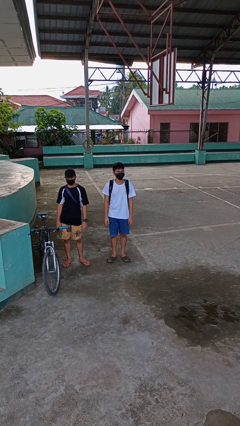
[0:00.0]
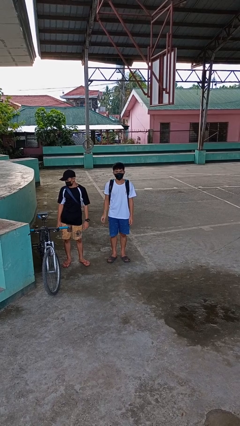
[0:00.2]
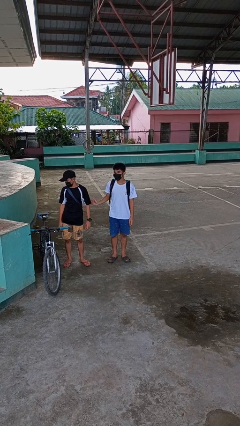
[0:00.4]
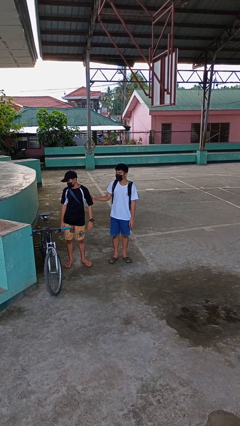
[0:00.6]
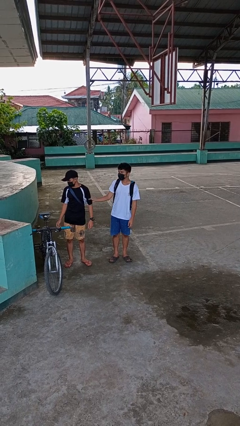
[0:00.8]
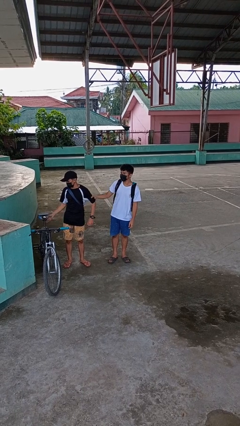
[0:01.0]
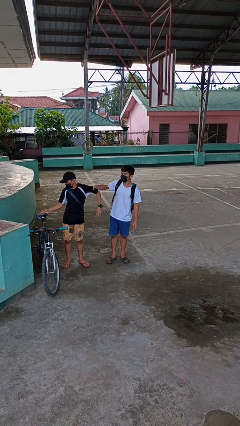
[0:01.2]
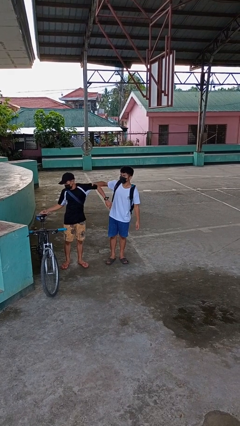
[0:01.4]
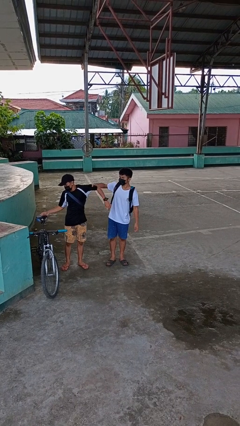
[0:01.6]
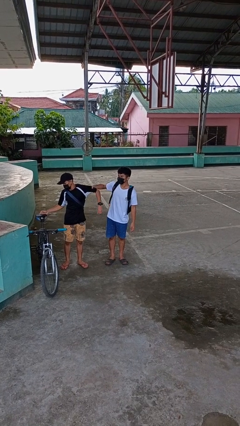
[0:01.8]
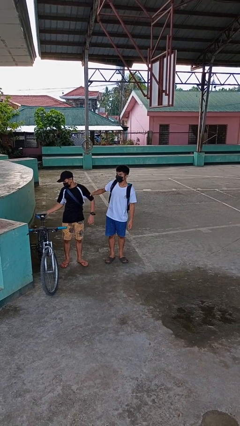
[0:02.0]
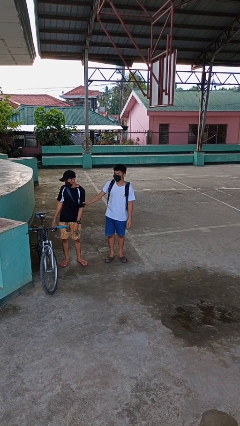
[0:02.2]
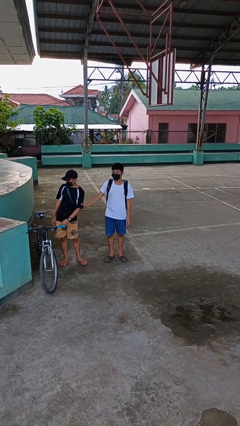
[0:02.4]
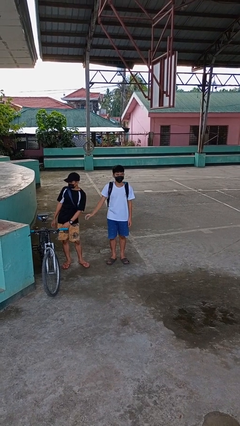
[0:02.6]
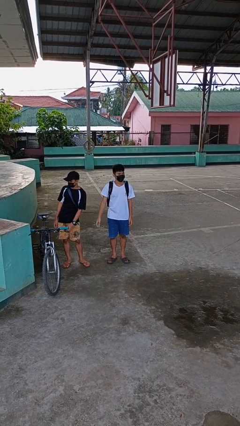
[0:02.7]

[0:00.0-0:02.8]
person grabs person by bicep

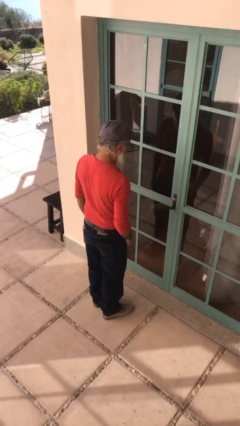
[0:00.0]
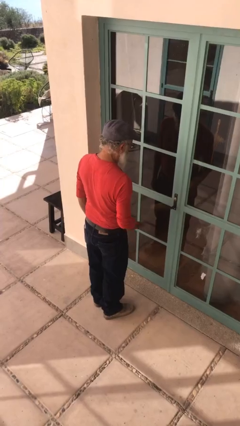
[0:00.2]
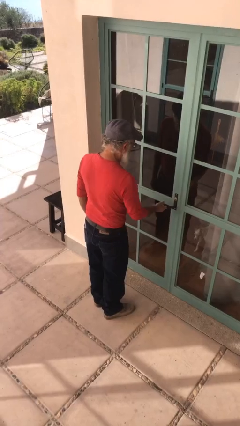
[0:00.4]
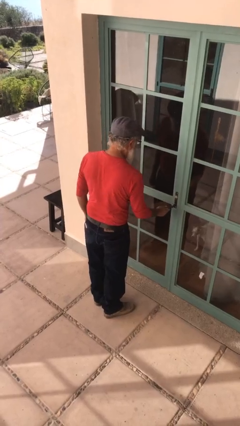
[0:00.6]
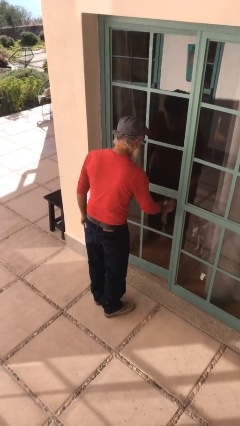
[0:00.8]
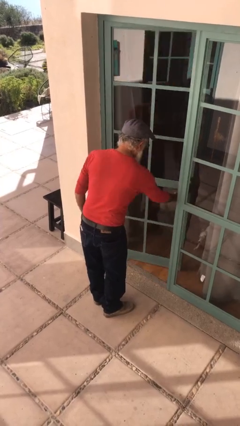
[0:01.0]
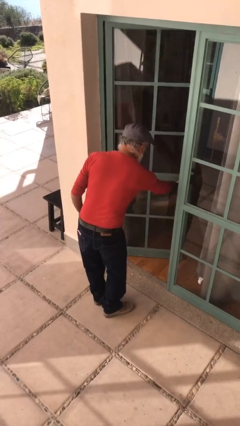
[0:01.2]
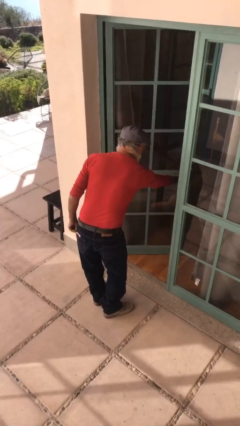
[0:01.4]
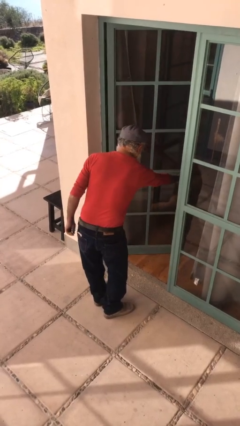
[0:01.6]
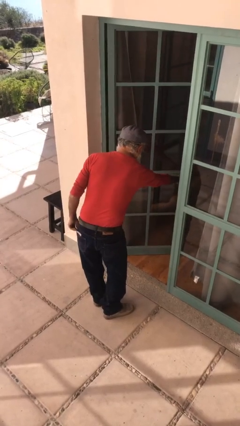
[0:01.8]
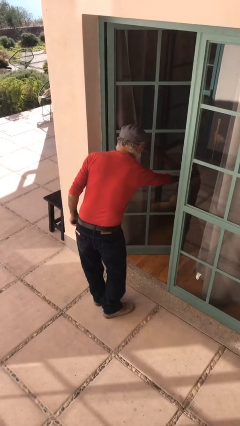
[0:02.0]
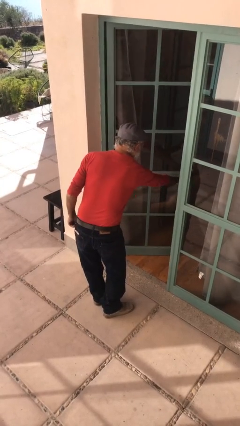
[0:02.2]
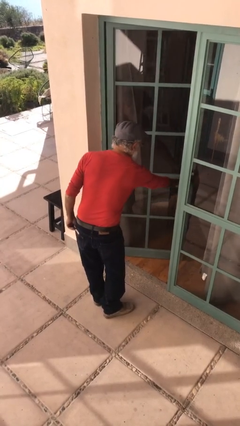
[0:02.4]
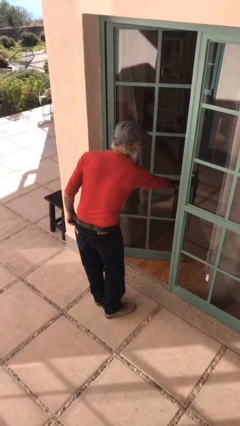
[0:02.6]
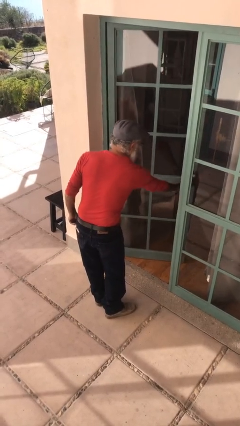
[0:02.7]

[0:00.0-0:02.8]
person opens facility door

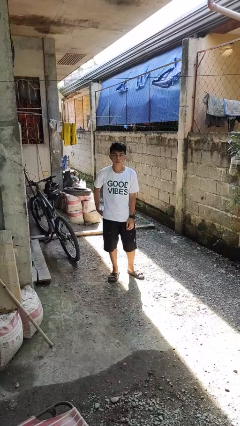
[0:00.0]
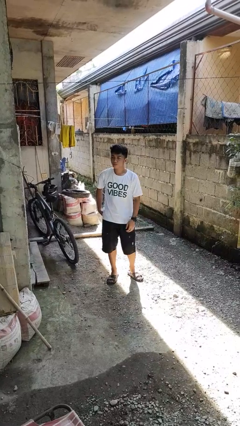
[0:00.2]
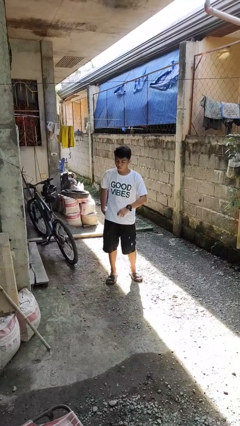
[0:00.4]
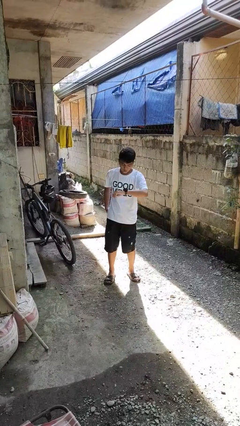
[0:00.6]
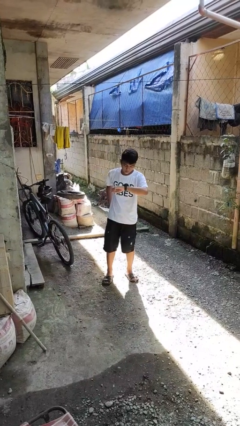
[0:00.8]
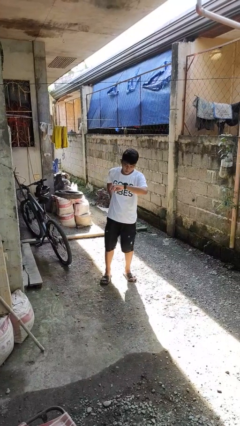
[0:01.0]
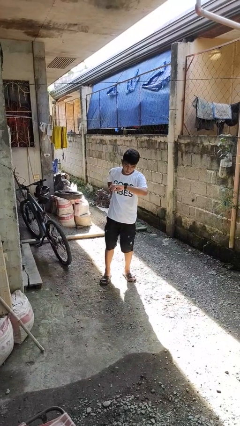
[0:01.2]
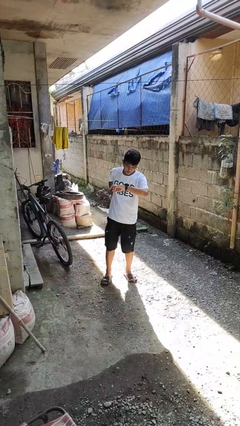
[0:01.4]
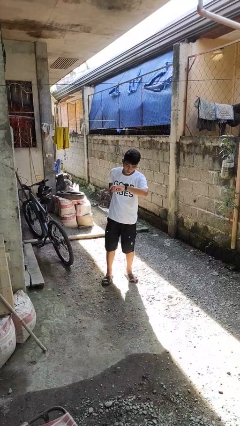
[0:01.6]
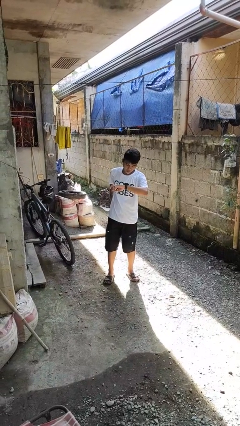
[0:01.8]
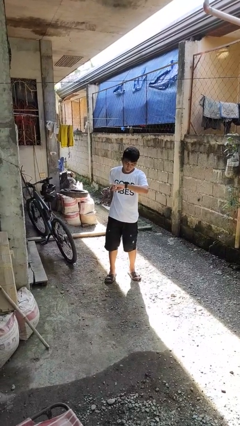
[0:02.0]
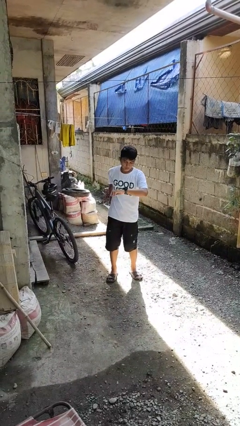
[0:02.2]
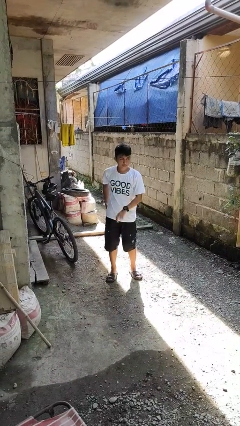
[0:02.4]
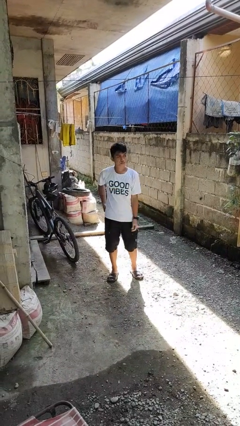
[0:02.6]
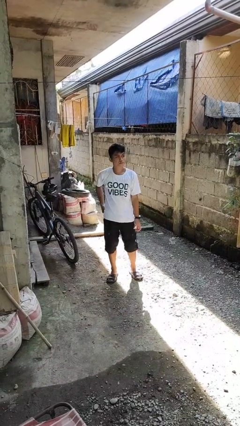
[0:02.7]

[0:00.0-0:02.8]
person looks at wristwatch

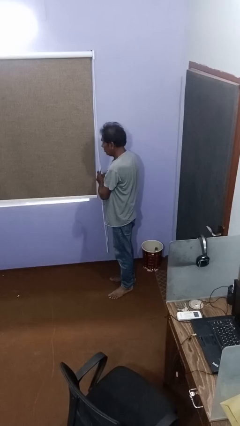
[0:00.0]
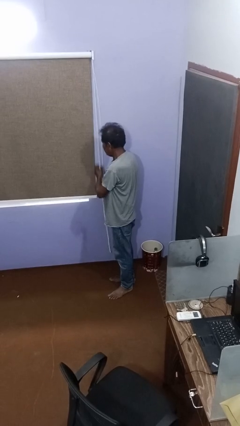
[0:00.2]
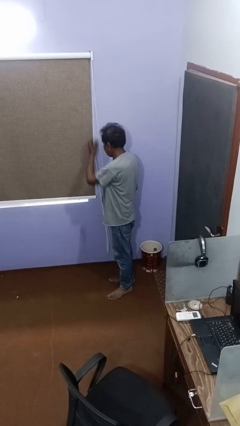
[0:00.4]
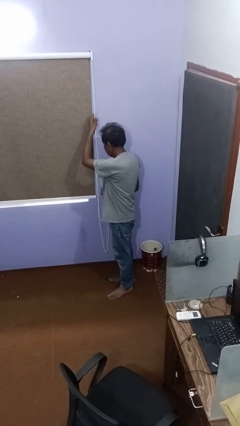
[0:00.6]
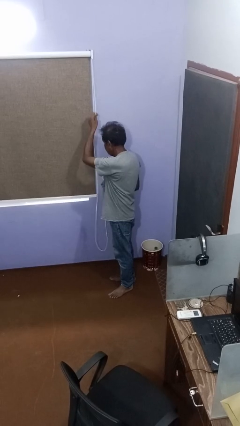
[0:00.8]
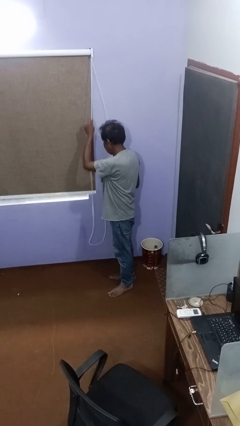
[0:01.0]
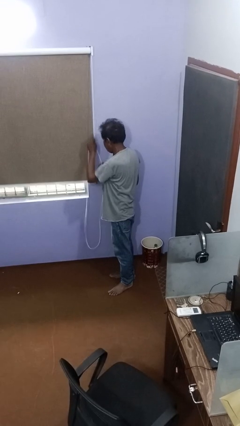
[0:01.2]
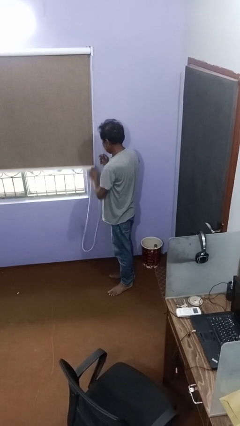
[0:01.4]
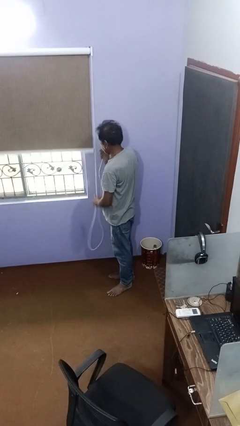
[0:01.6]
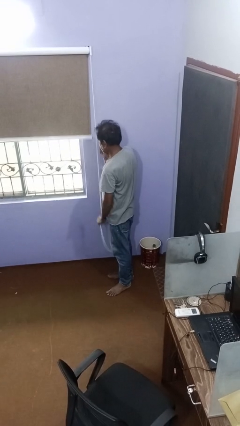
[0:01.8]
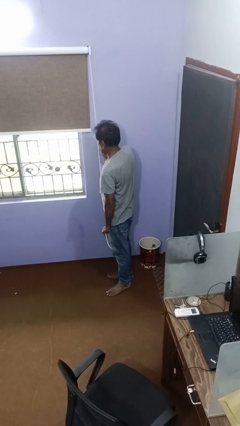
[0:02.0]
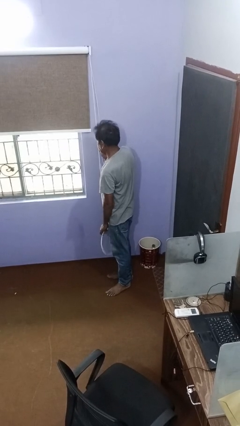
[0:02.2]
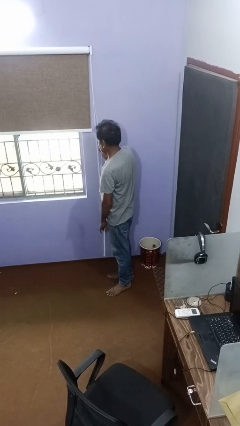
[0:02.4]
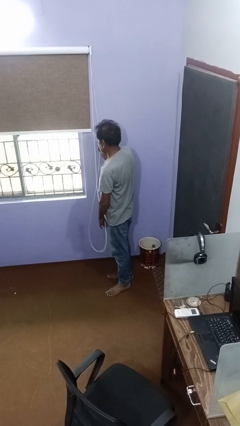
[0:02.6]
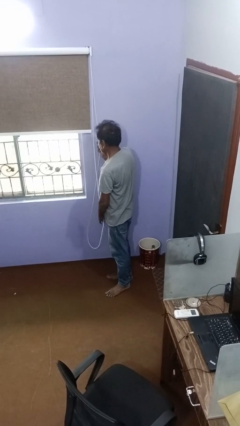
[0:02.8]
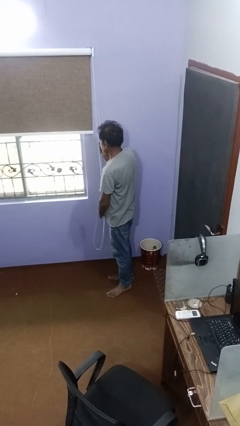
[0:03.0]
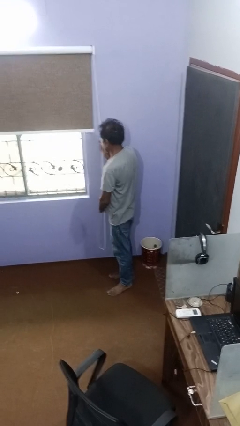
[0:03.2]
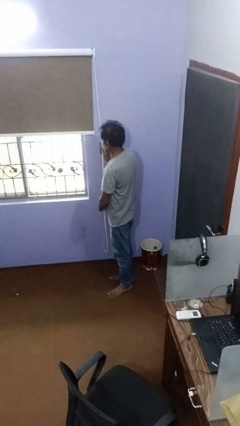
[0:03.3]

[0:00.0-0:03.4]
person opens curtains

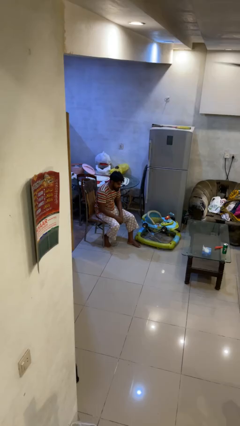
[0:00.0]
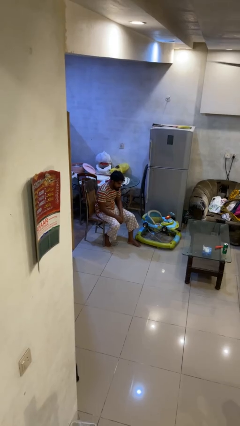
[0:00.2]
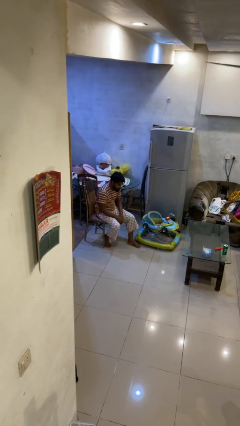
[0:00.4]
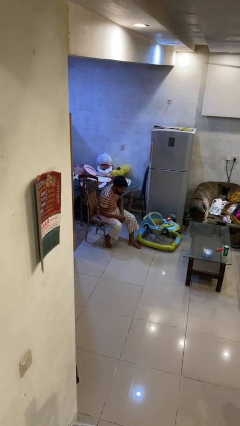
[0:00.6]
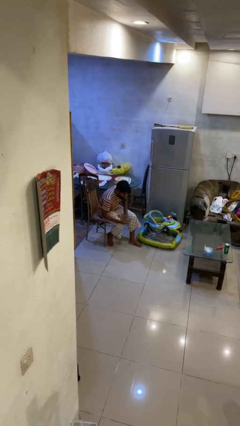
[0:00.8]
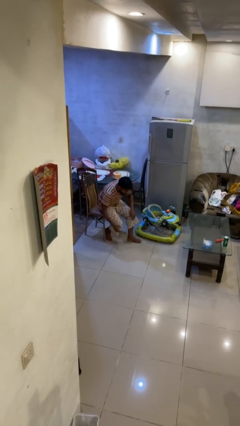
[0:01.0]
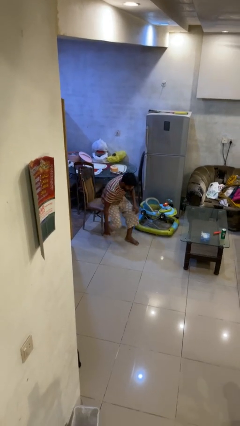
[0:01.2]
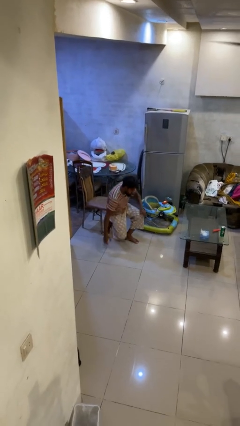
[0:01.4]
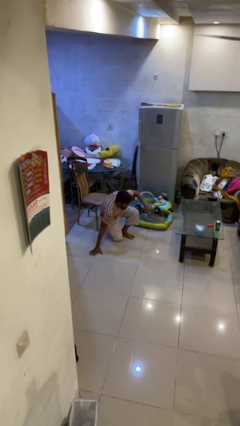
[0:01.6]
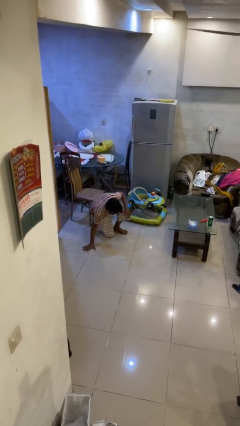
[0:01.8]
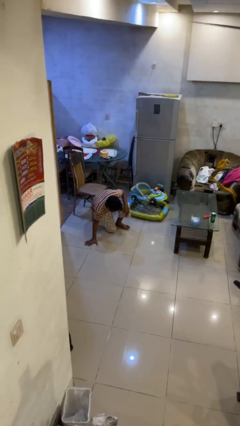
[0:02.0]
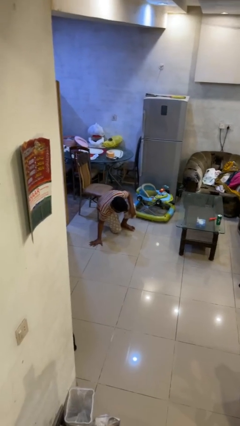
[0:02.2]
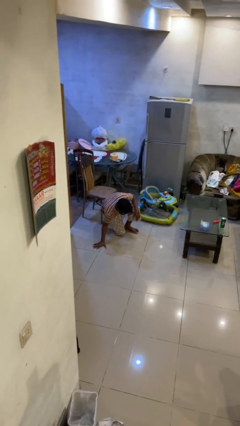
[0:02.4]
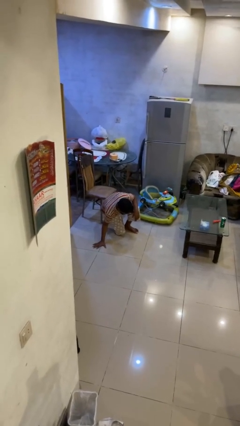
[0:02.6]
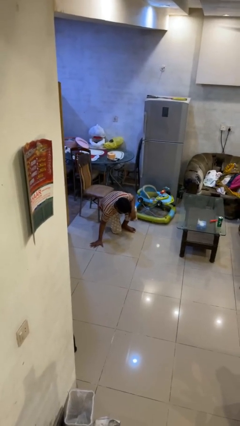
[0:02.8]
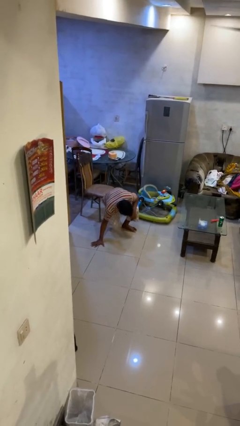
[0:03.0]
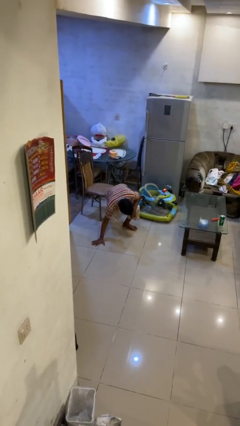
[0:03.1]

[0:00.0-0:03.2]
person falls from chair

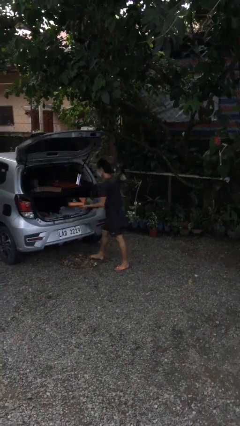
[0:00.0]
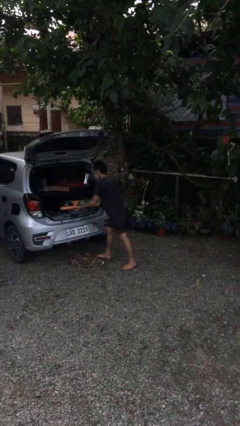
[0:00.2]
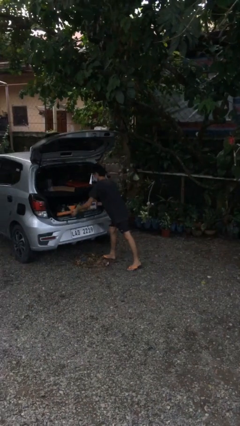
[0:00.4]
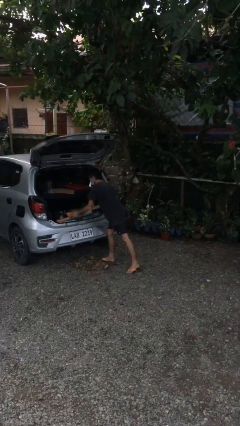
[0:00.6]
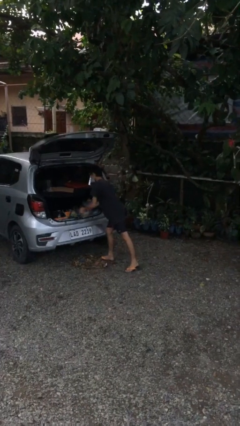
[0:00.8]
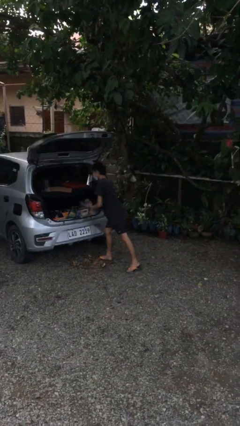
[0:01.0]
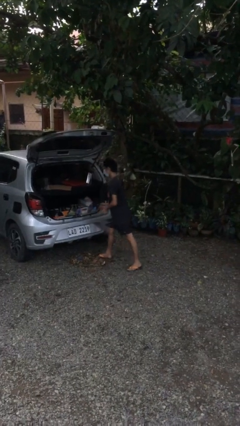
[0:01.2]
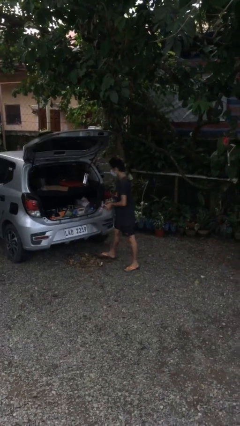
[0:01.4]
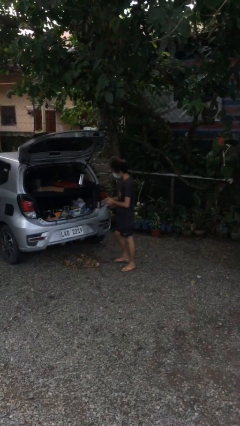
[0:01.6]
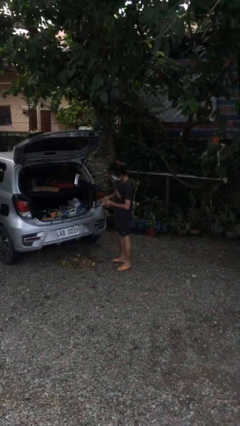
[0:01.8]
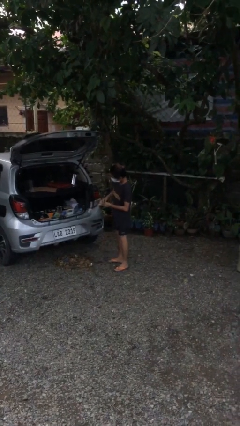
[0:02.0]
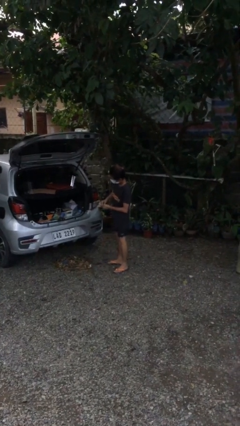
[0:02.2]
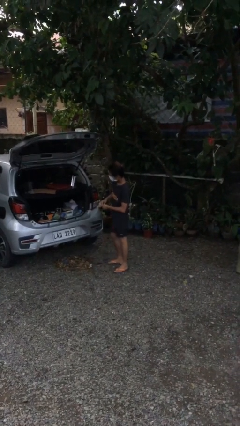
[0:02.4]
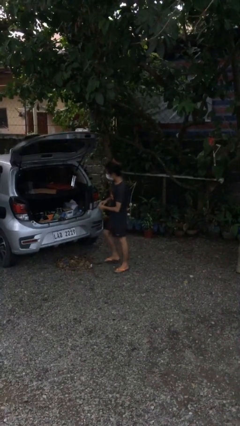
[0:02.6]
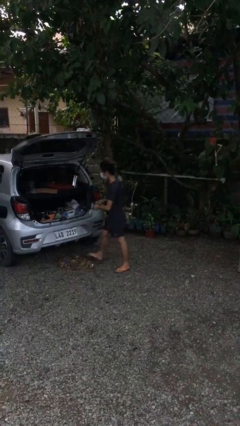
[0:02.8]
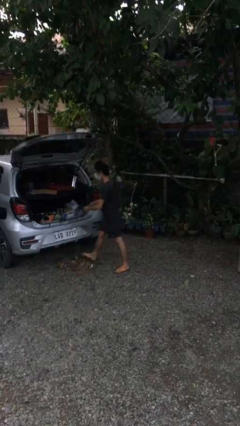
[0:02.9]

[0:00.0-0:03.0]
person loads car
